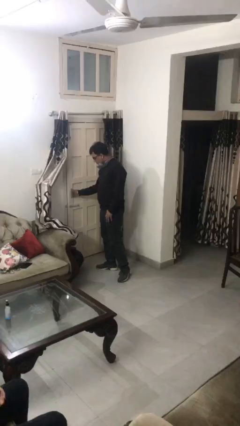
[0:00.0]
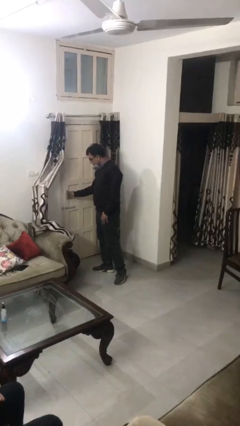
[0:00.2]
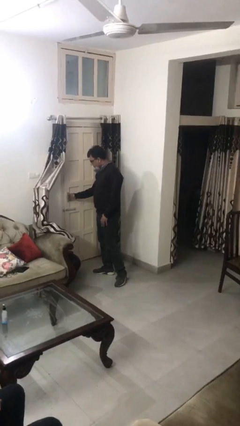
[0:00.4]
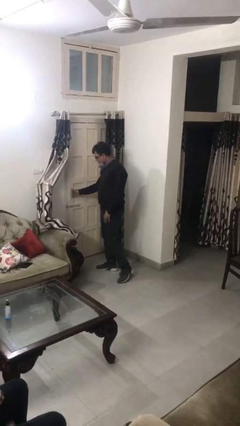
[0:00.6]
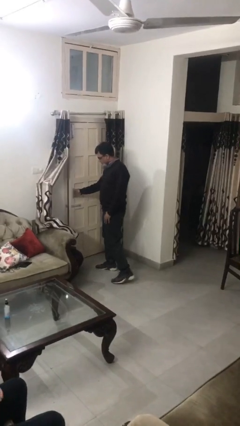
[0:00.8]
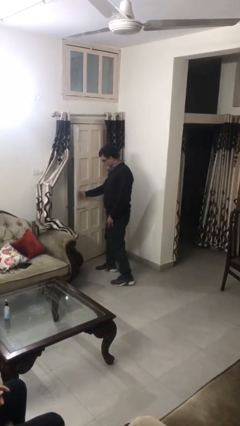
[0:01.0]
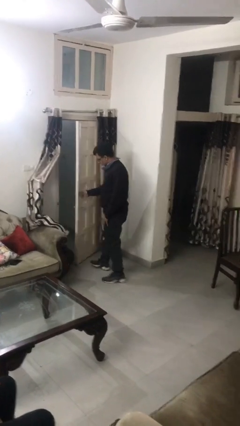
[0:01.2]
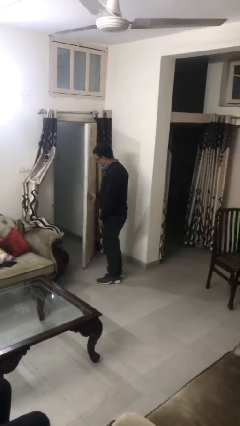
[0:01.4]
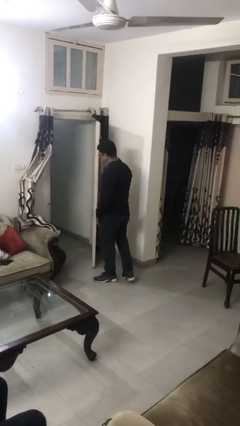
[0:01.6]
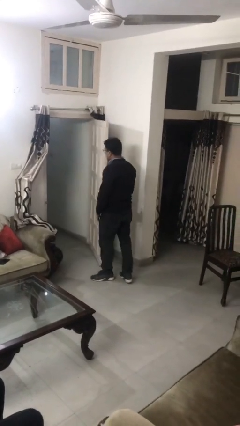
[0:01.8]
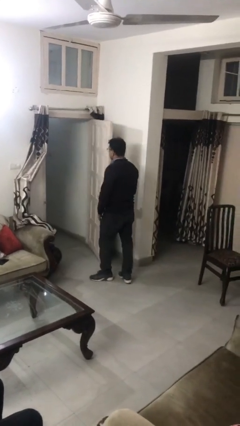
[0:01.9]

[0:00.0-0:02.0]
person opens facility door

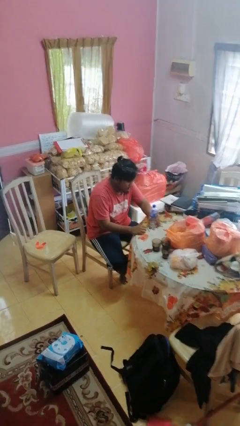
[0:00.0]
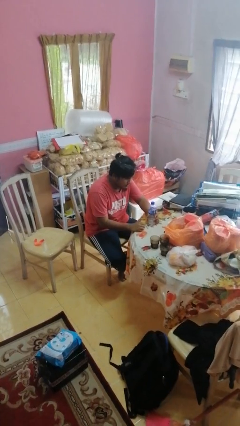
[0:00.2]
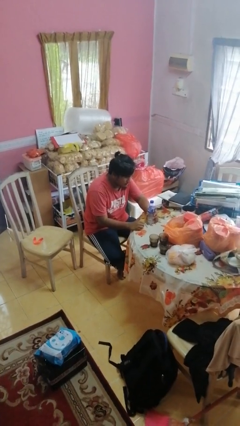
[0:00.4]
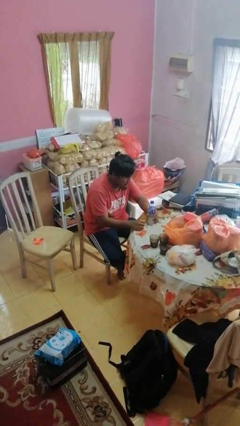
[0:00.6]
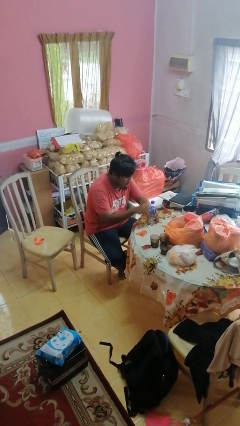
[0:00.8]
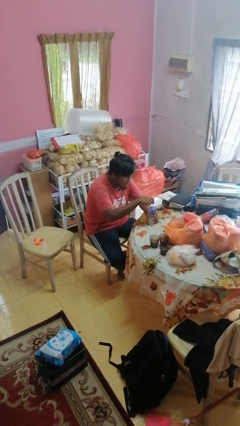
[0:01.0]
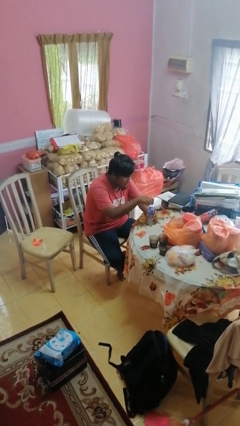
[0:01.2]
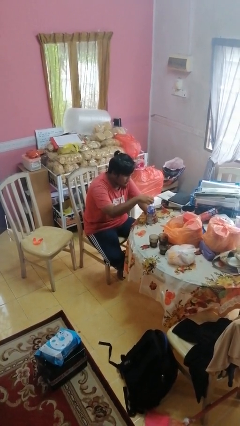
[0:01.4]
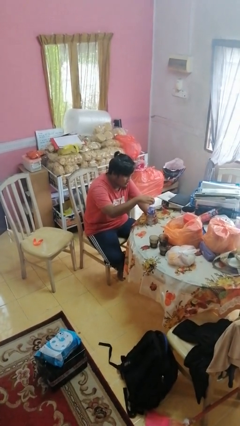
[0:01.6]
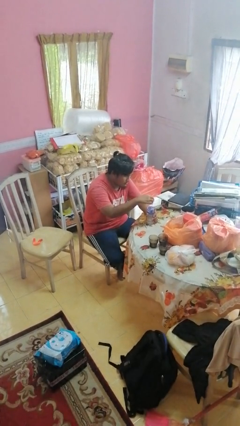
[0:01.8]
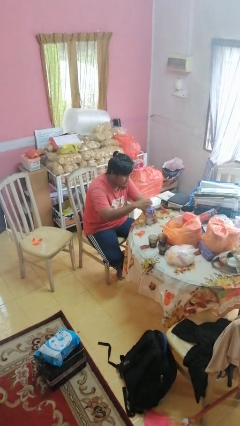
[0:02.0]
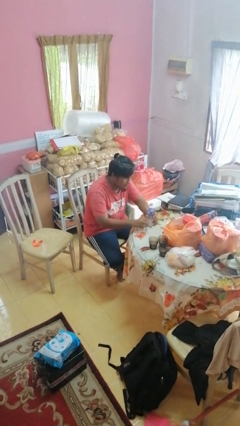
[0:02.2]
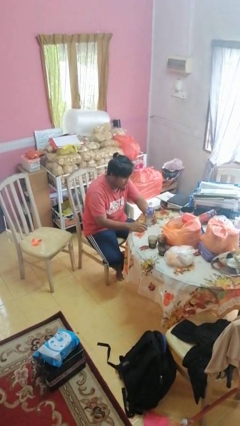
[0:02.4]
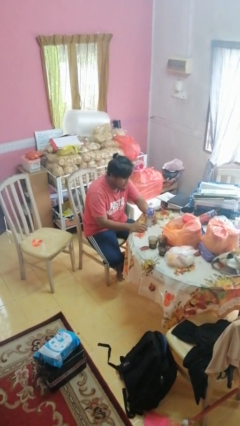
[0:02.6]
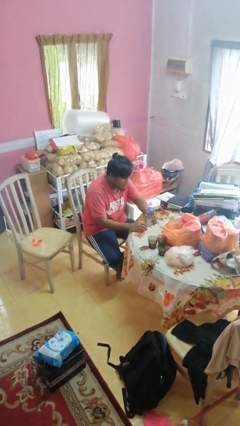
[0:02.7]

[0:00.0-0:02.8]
person unscrews lid from bottle

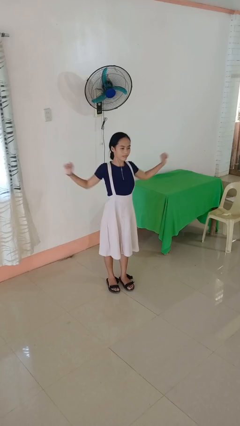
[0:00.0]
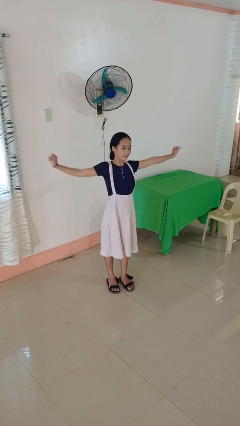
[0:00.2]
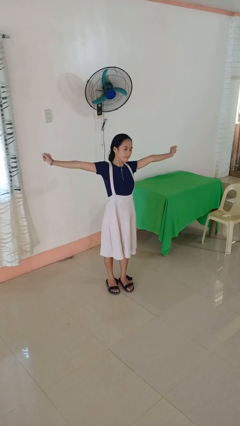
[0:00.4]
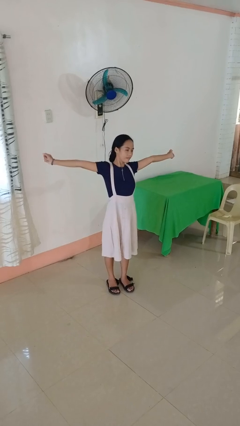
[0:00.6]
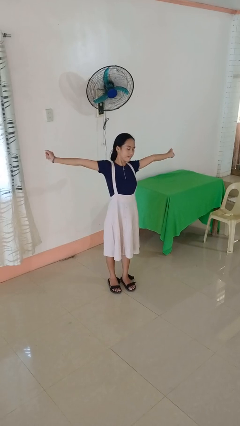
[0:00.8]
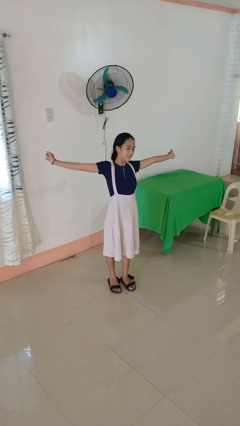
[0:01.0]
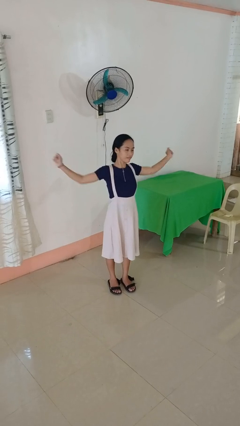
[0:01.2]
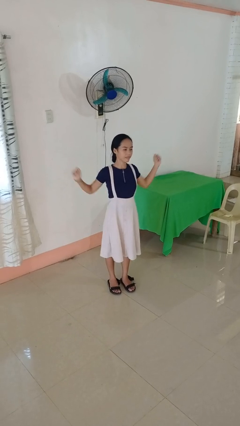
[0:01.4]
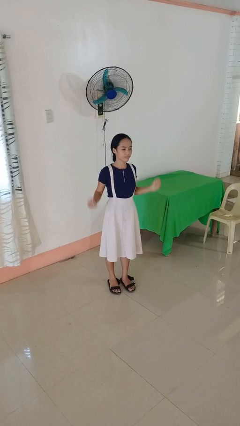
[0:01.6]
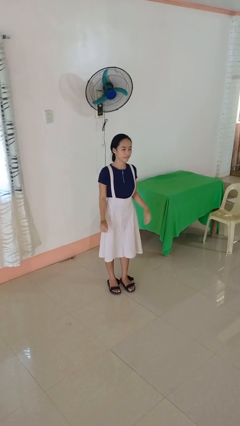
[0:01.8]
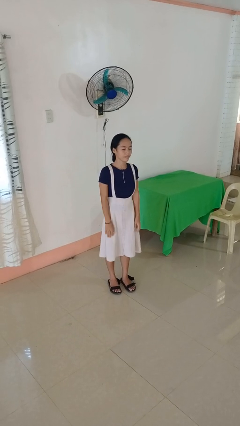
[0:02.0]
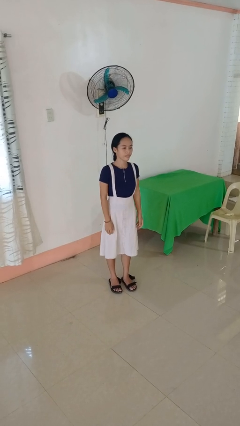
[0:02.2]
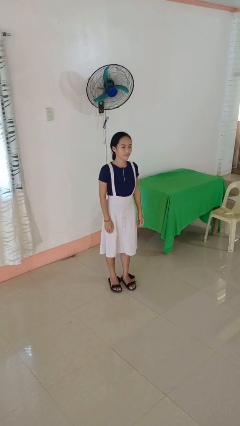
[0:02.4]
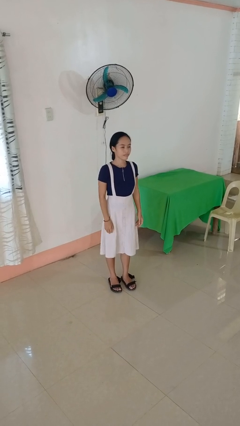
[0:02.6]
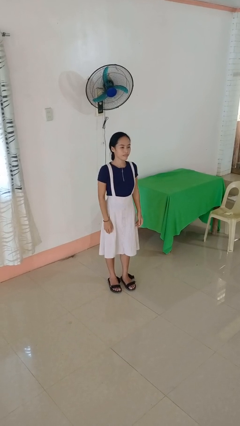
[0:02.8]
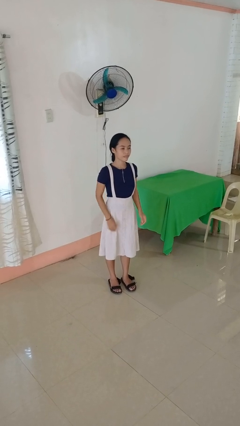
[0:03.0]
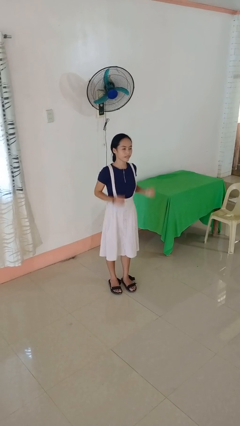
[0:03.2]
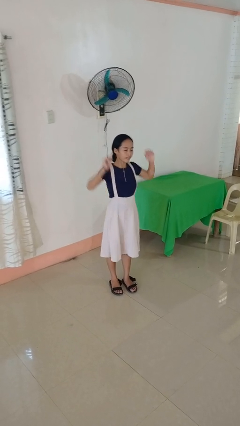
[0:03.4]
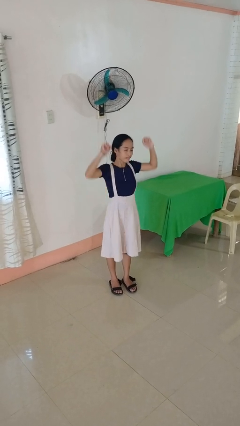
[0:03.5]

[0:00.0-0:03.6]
person stretches arms to side

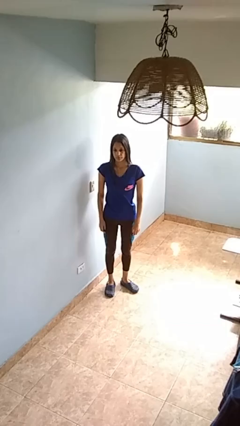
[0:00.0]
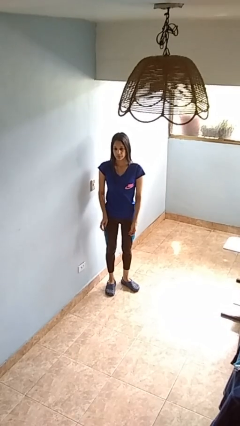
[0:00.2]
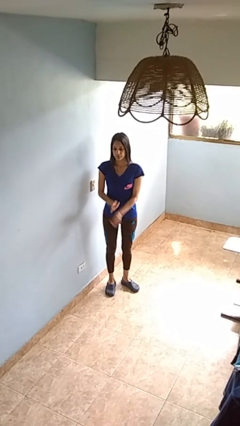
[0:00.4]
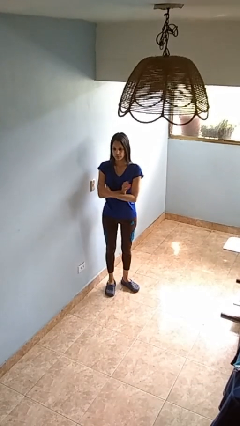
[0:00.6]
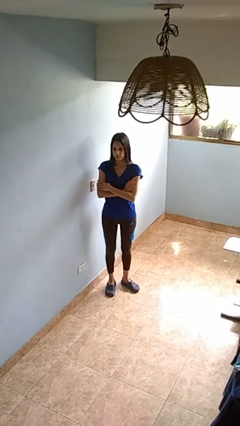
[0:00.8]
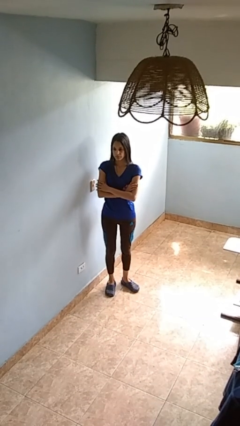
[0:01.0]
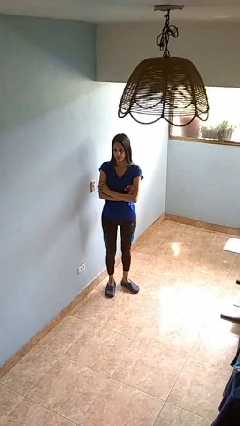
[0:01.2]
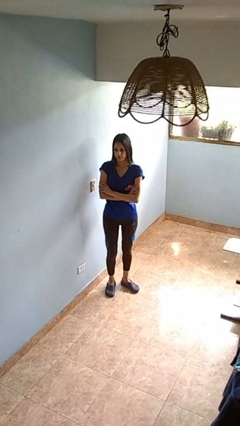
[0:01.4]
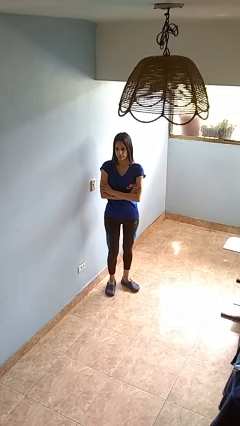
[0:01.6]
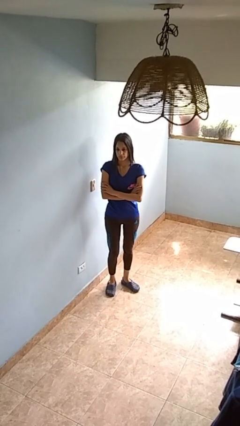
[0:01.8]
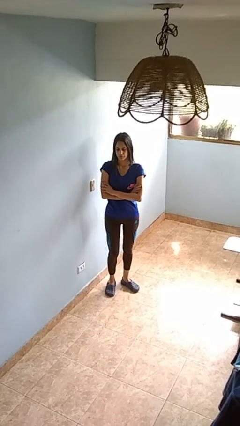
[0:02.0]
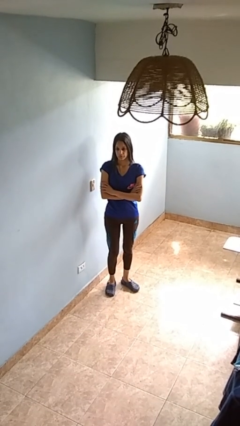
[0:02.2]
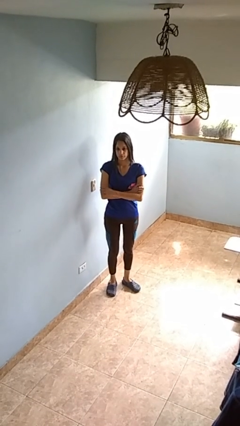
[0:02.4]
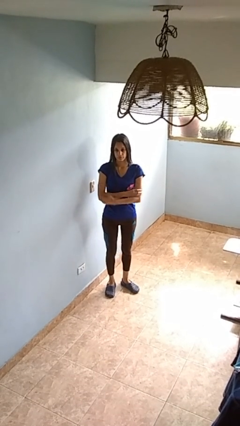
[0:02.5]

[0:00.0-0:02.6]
person crosses arms

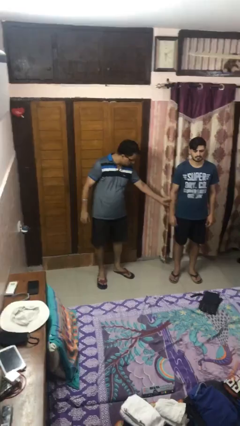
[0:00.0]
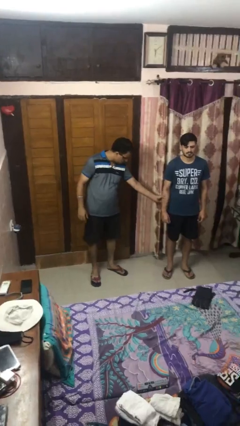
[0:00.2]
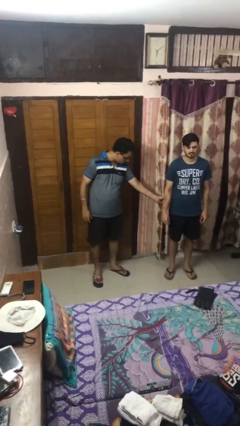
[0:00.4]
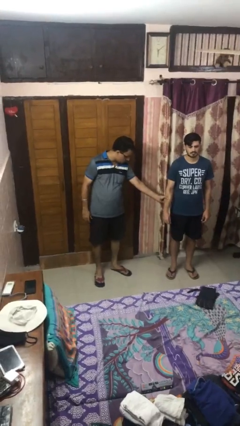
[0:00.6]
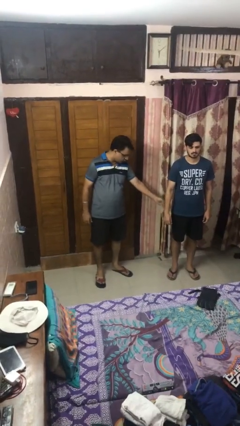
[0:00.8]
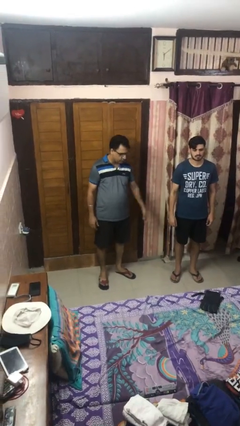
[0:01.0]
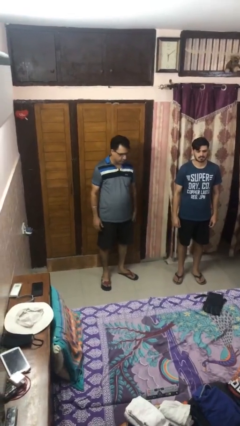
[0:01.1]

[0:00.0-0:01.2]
person grabs person by forearm

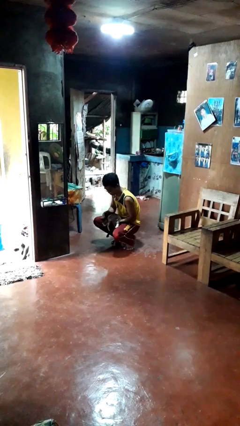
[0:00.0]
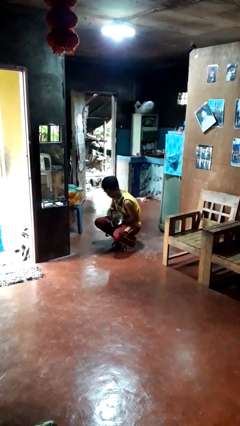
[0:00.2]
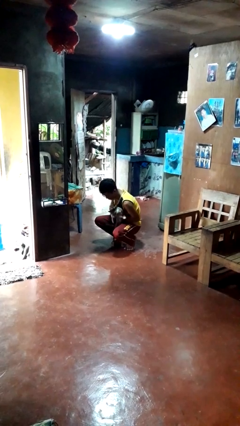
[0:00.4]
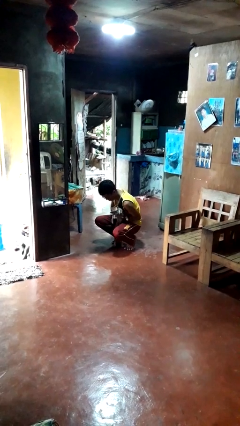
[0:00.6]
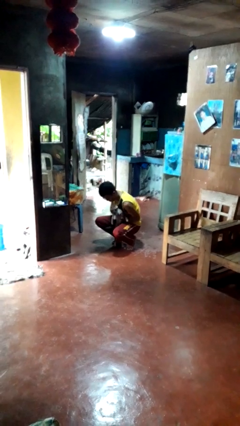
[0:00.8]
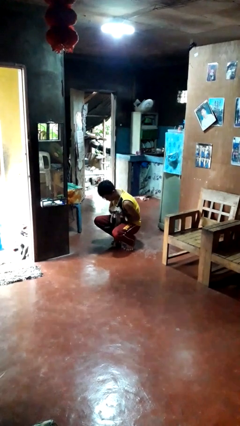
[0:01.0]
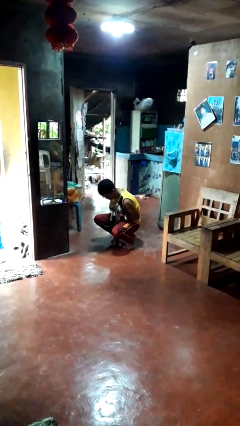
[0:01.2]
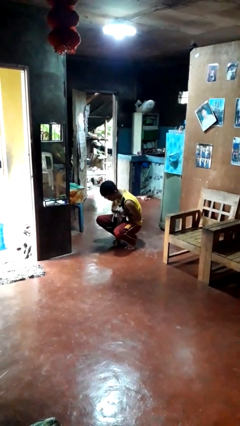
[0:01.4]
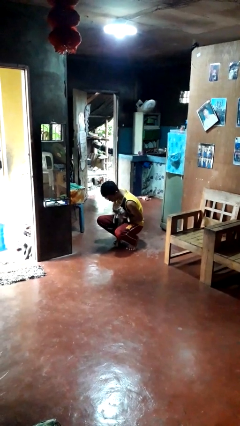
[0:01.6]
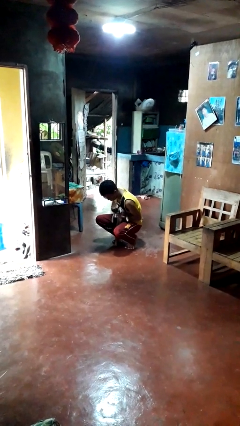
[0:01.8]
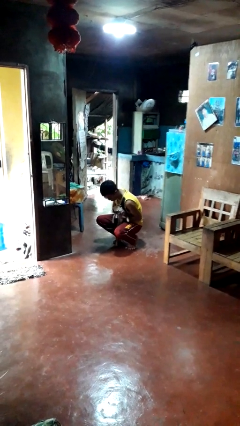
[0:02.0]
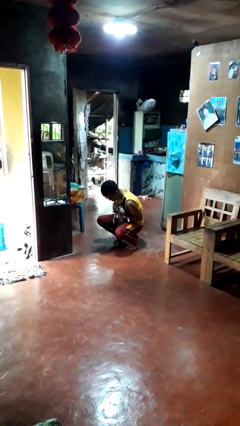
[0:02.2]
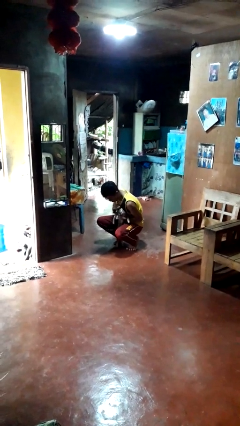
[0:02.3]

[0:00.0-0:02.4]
person hugs cat

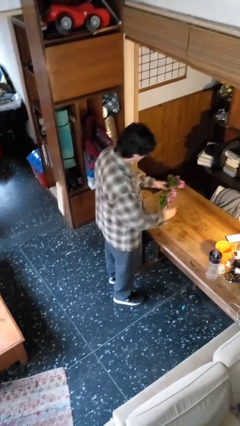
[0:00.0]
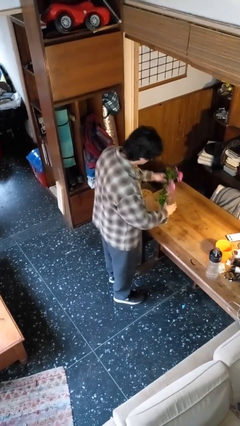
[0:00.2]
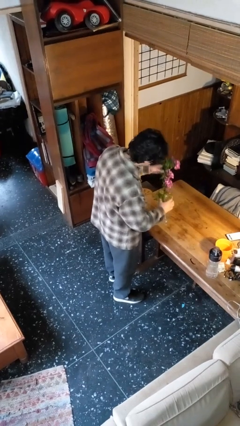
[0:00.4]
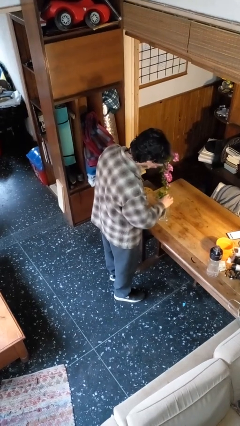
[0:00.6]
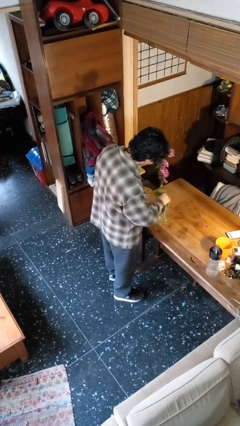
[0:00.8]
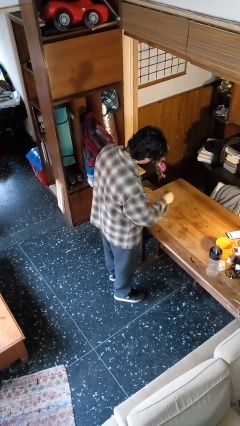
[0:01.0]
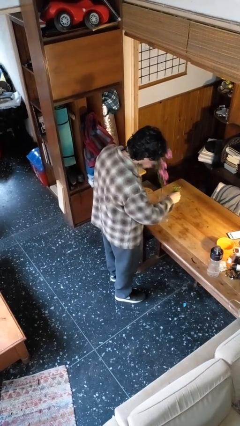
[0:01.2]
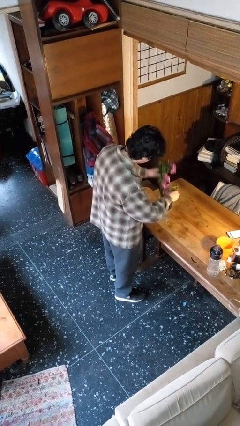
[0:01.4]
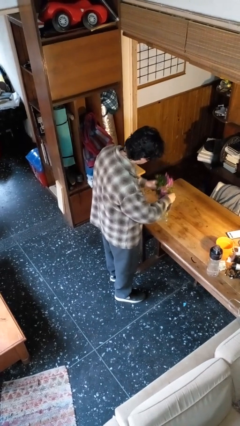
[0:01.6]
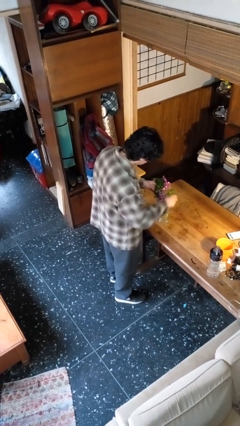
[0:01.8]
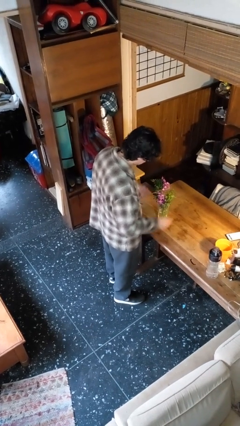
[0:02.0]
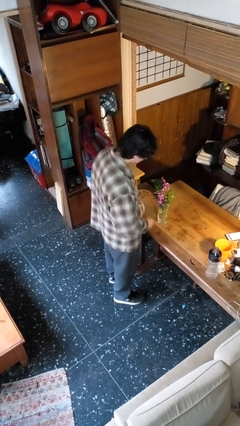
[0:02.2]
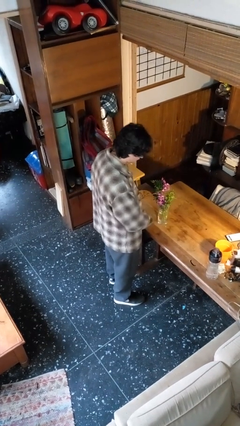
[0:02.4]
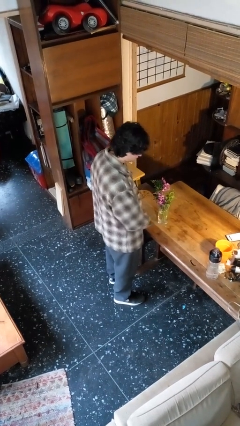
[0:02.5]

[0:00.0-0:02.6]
person arranges flowers in vase

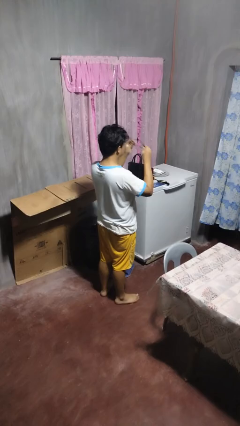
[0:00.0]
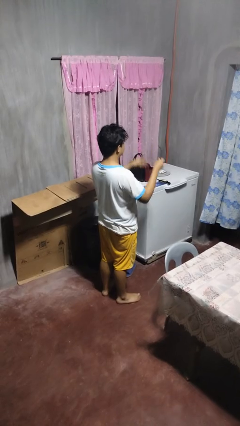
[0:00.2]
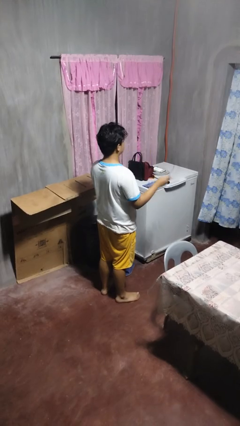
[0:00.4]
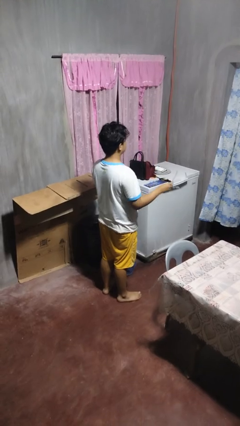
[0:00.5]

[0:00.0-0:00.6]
person takes off glasses
